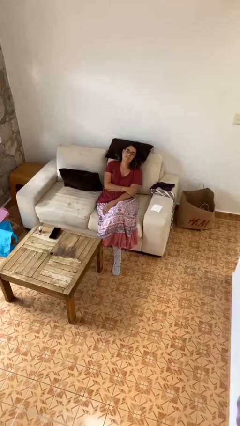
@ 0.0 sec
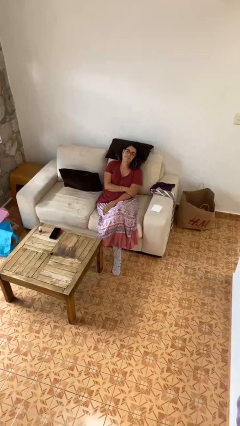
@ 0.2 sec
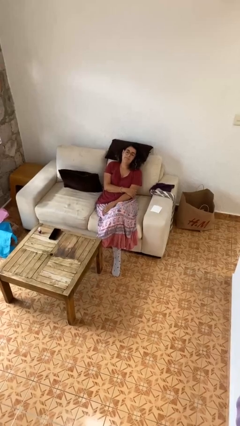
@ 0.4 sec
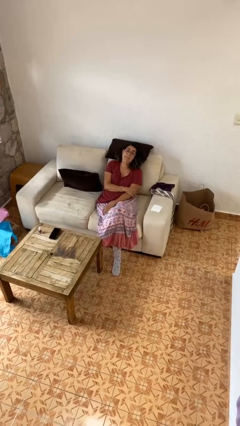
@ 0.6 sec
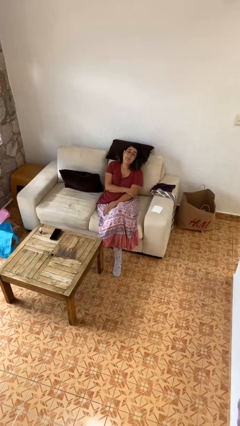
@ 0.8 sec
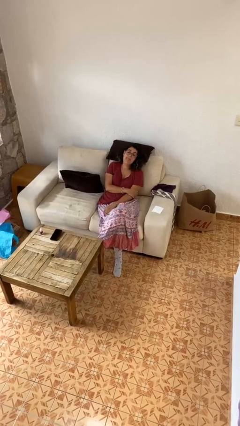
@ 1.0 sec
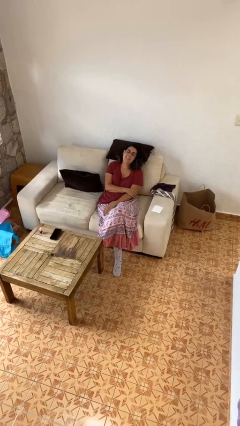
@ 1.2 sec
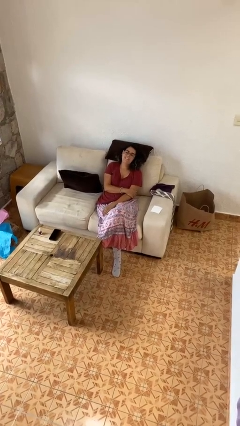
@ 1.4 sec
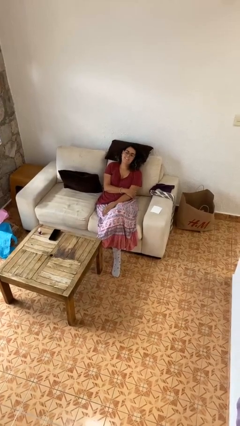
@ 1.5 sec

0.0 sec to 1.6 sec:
person sticks out tongue

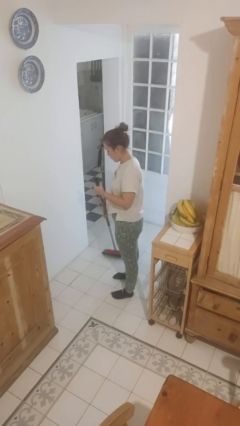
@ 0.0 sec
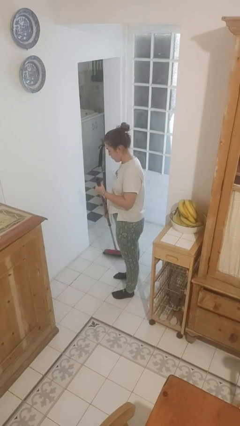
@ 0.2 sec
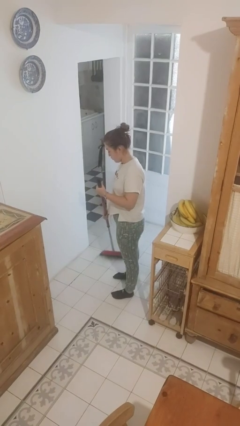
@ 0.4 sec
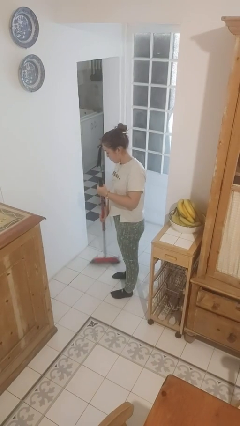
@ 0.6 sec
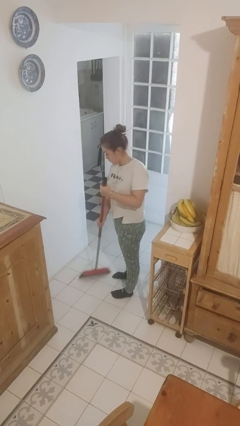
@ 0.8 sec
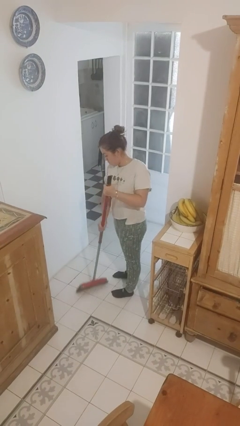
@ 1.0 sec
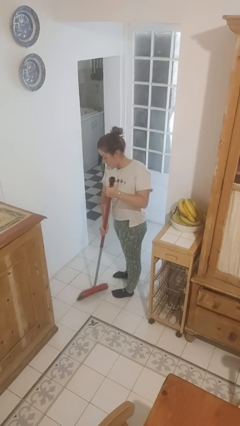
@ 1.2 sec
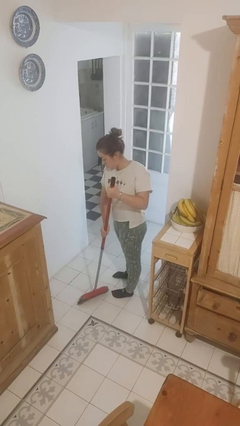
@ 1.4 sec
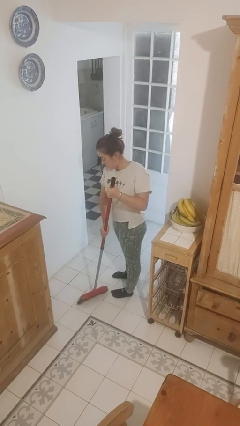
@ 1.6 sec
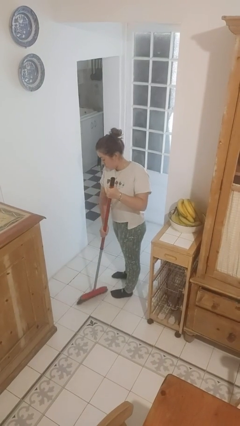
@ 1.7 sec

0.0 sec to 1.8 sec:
person sweeps floor

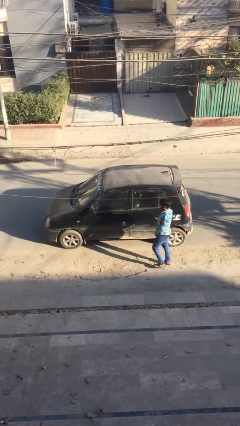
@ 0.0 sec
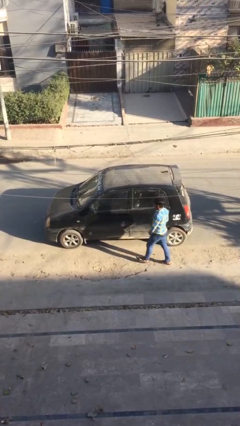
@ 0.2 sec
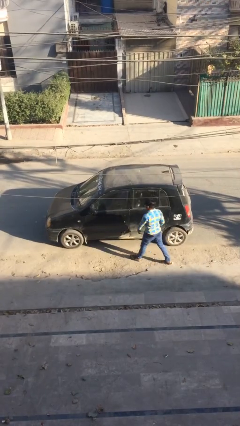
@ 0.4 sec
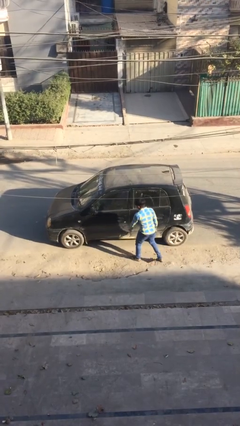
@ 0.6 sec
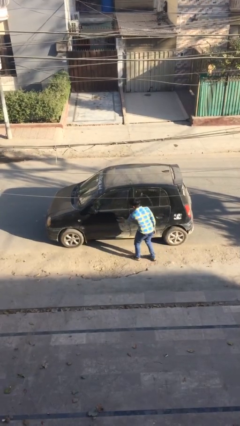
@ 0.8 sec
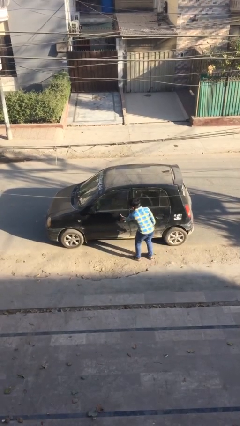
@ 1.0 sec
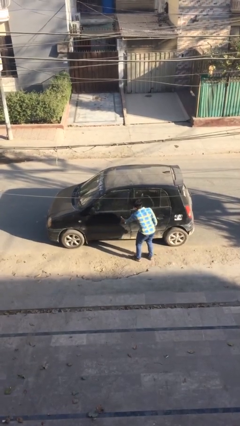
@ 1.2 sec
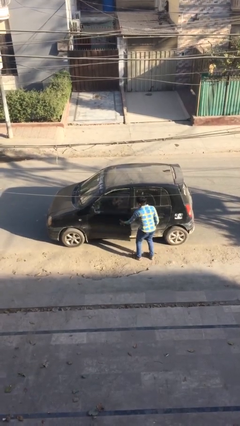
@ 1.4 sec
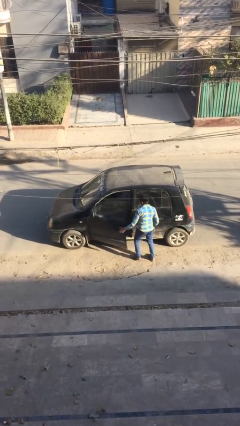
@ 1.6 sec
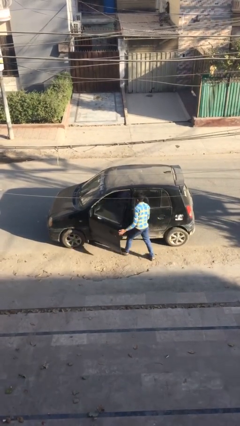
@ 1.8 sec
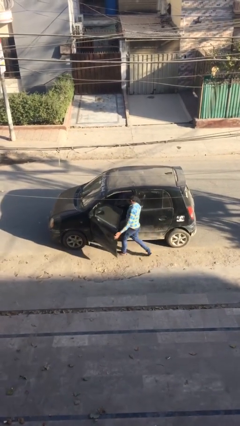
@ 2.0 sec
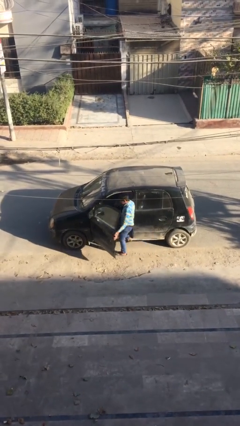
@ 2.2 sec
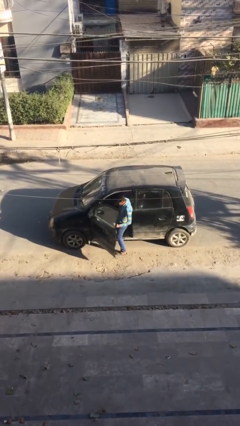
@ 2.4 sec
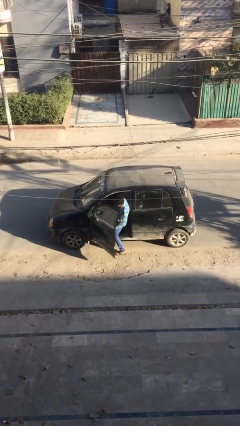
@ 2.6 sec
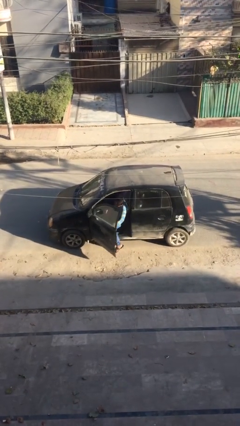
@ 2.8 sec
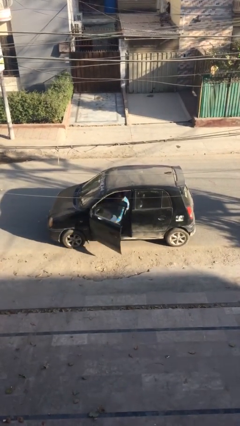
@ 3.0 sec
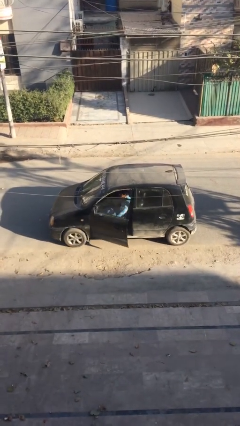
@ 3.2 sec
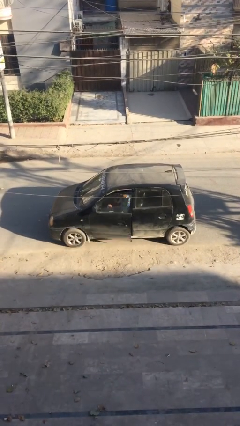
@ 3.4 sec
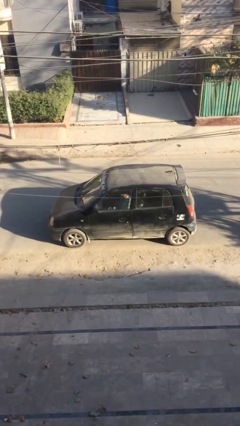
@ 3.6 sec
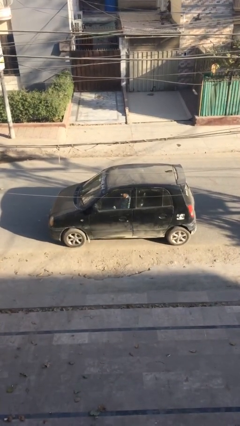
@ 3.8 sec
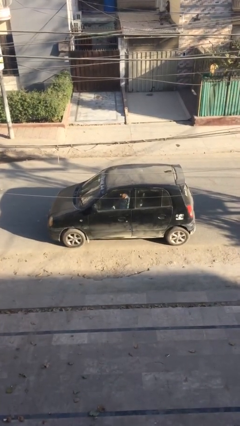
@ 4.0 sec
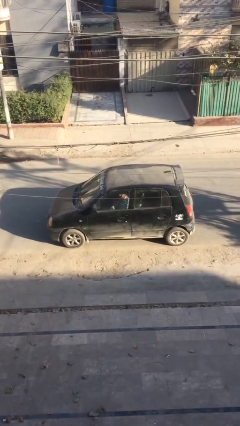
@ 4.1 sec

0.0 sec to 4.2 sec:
car picks up person

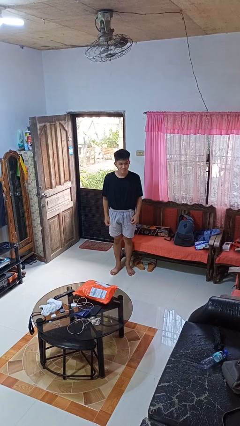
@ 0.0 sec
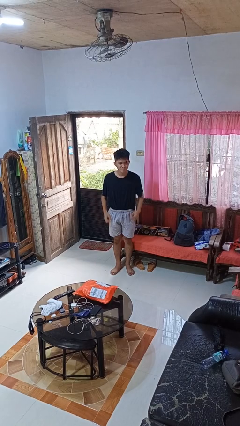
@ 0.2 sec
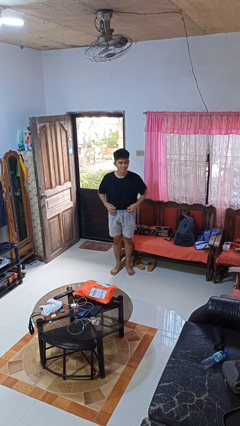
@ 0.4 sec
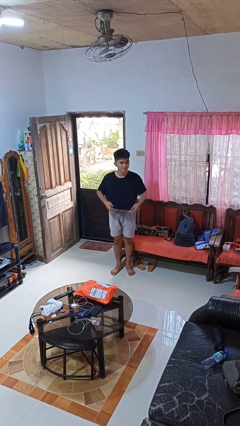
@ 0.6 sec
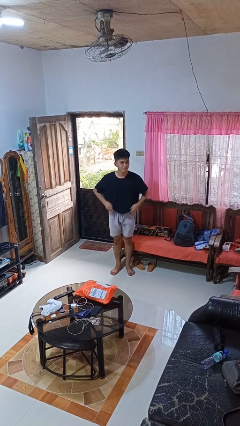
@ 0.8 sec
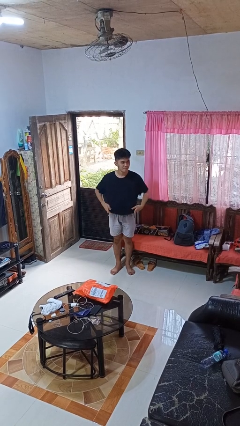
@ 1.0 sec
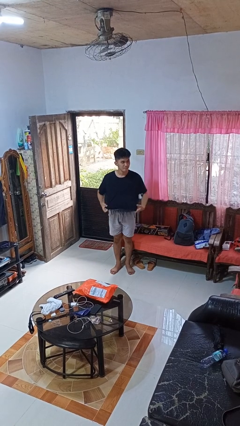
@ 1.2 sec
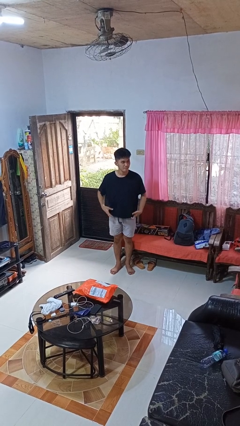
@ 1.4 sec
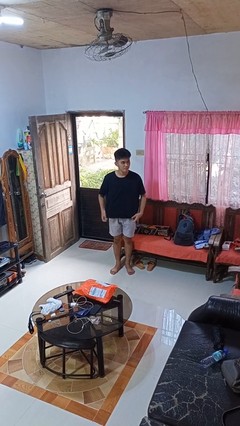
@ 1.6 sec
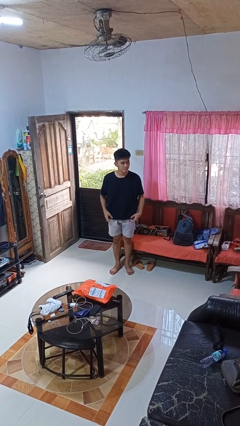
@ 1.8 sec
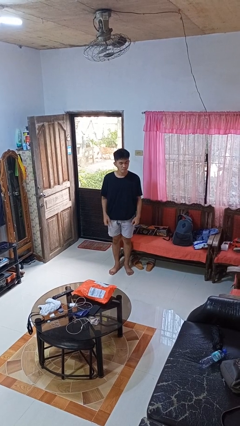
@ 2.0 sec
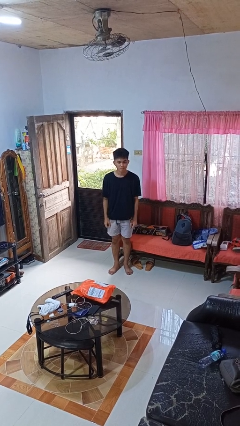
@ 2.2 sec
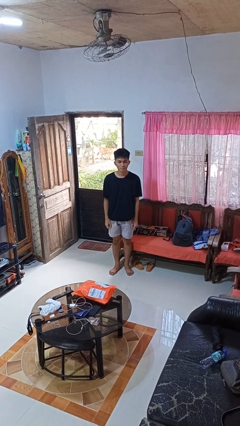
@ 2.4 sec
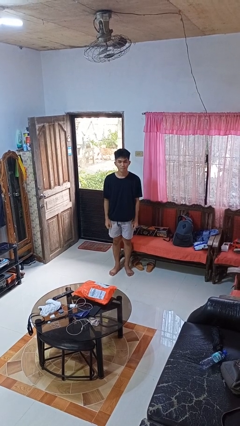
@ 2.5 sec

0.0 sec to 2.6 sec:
person untucks shirt

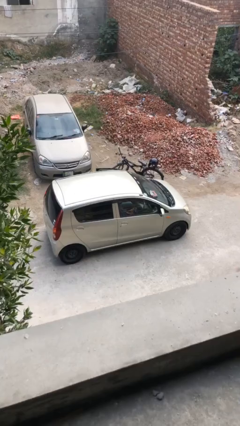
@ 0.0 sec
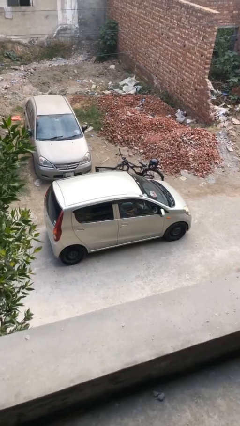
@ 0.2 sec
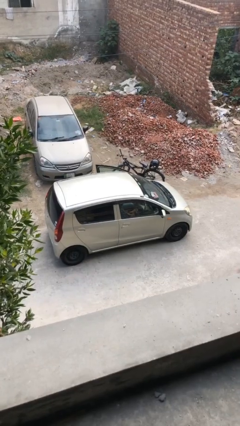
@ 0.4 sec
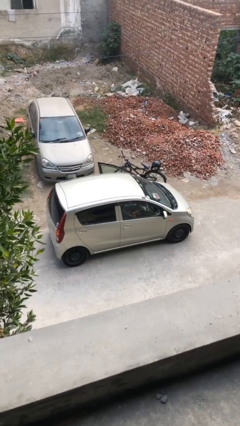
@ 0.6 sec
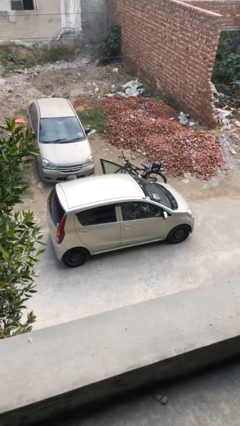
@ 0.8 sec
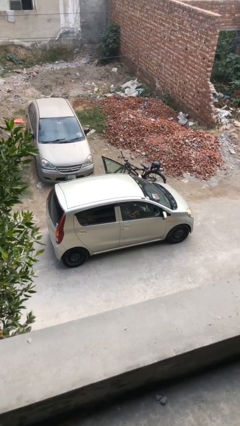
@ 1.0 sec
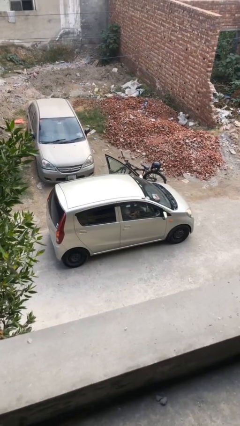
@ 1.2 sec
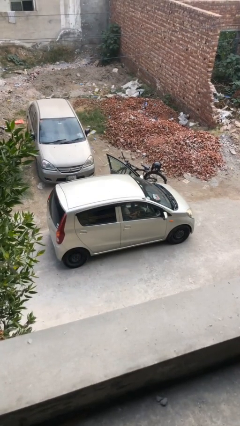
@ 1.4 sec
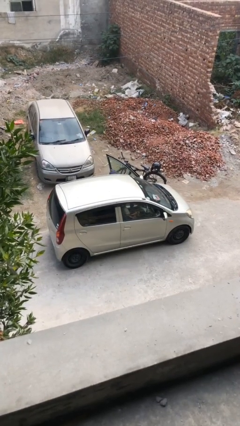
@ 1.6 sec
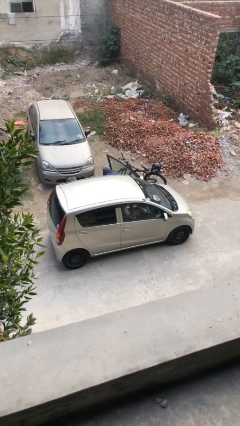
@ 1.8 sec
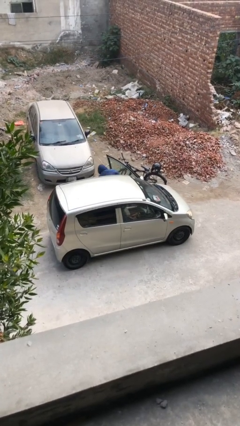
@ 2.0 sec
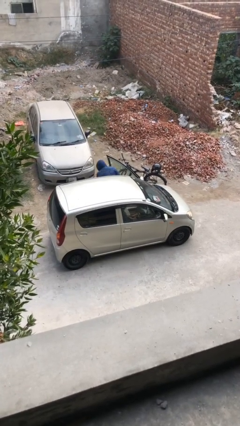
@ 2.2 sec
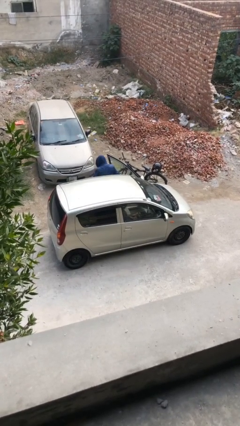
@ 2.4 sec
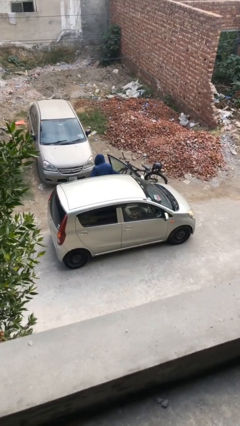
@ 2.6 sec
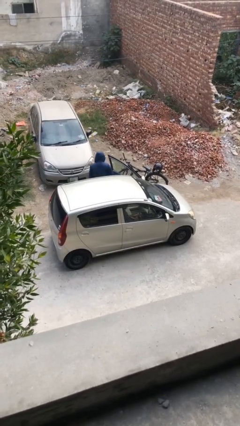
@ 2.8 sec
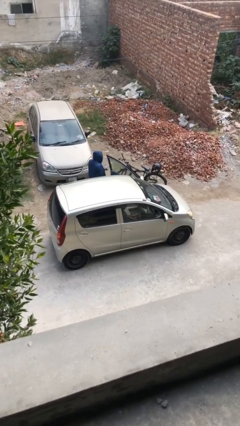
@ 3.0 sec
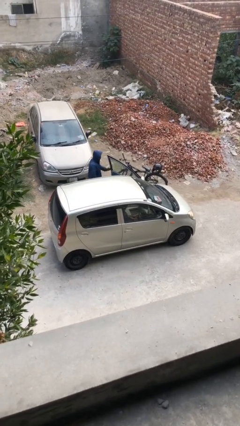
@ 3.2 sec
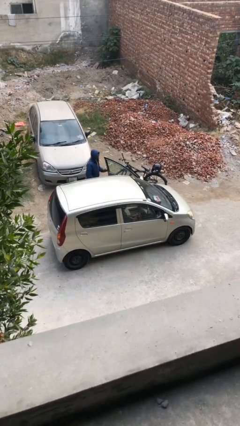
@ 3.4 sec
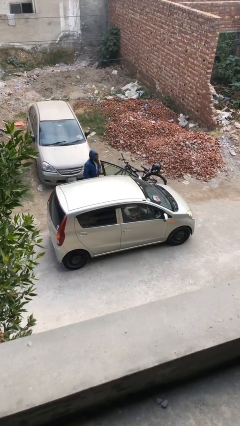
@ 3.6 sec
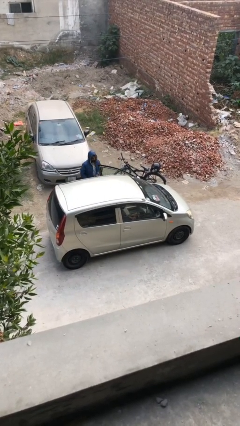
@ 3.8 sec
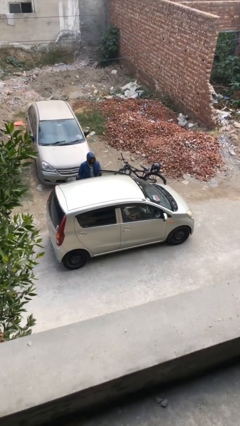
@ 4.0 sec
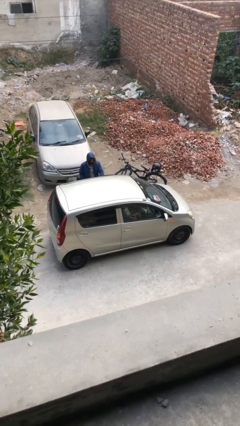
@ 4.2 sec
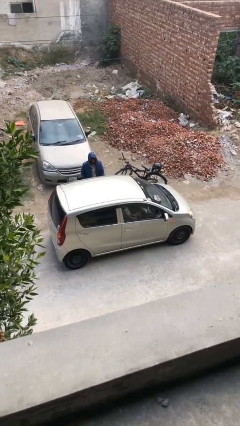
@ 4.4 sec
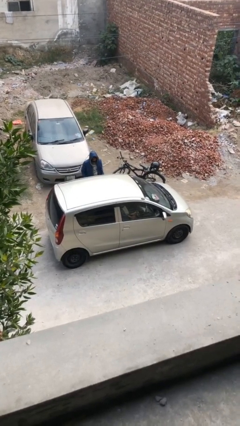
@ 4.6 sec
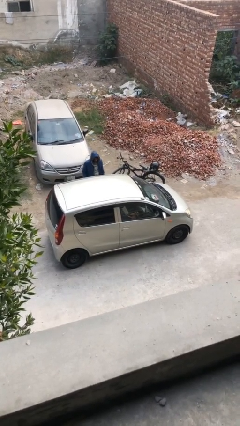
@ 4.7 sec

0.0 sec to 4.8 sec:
car drops off person

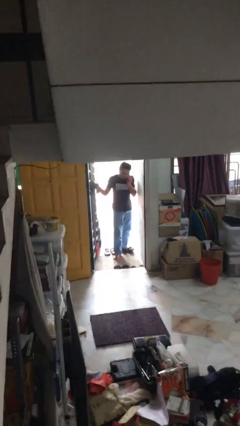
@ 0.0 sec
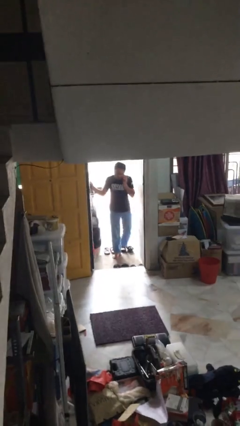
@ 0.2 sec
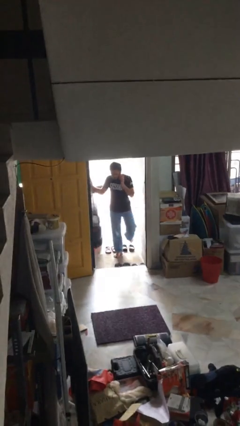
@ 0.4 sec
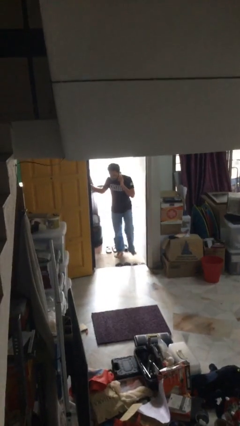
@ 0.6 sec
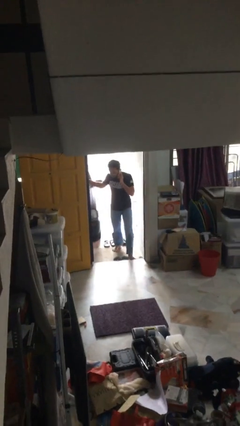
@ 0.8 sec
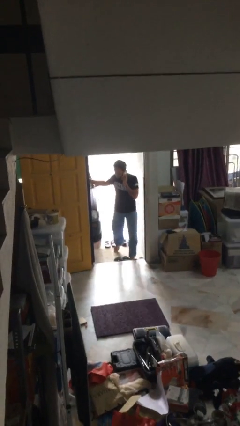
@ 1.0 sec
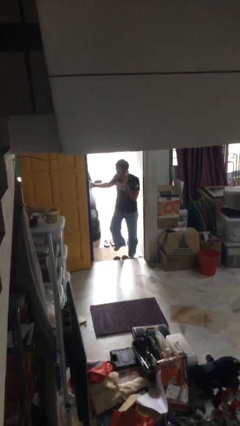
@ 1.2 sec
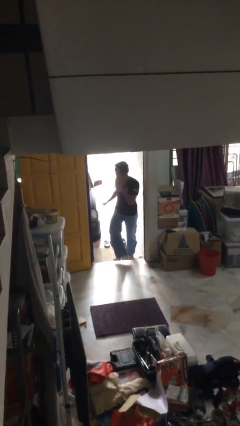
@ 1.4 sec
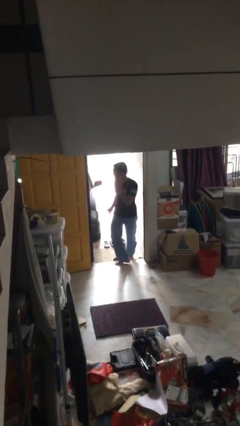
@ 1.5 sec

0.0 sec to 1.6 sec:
person enters scene through structure

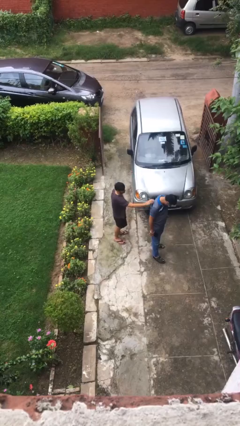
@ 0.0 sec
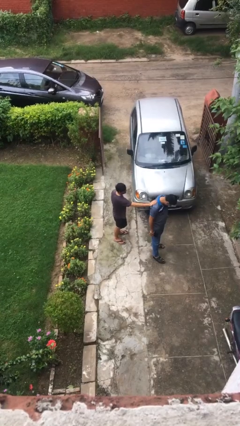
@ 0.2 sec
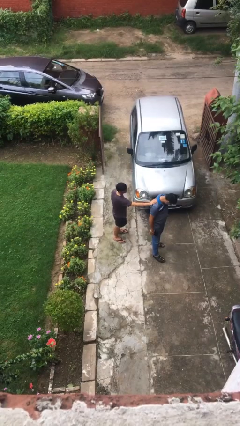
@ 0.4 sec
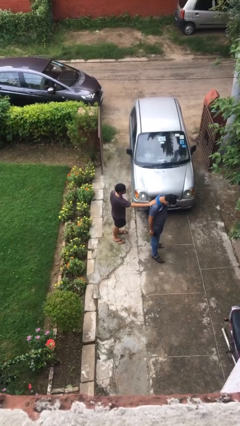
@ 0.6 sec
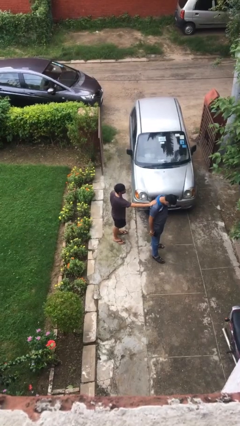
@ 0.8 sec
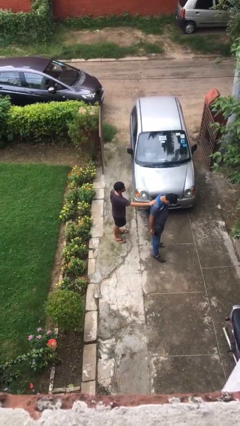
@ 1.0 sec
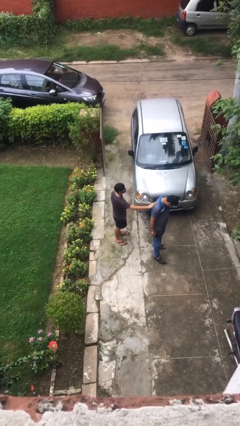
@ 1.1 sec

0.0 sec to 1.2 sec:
person touches back of person
